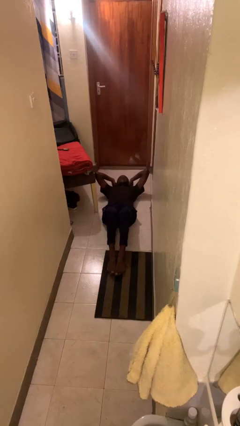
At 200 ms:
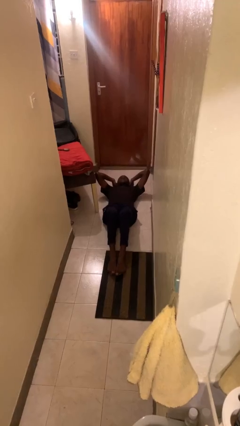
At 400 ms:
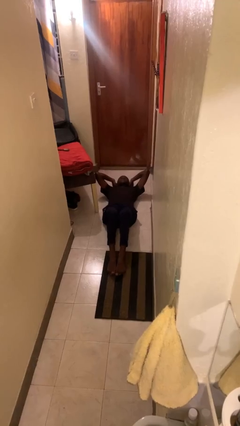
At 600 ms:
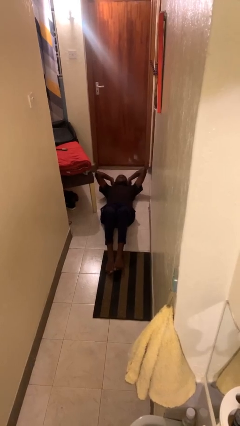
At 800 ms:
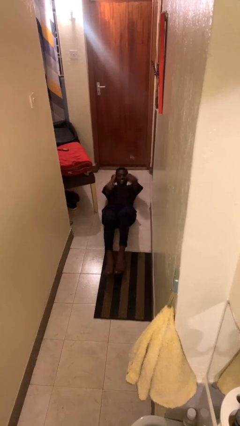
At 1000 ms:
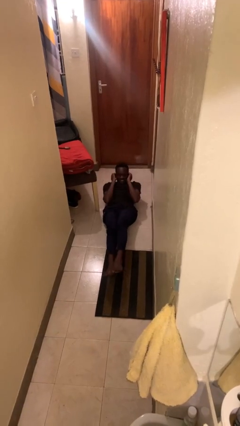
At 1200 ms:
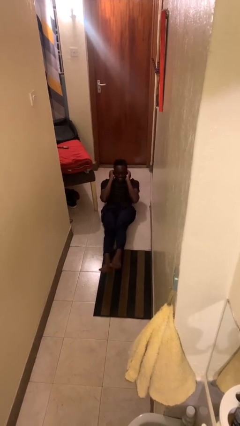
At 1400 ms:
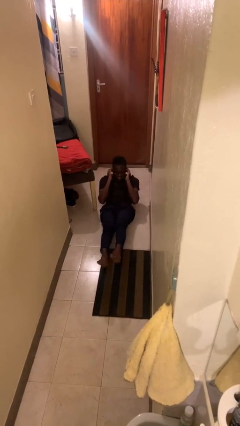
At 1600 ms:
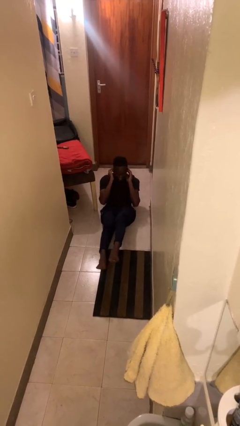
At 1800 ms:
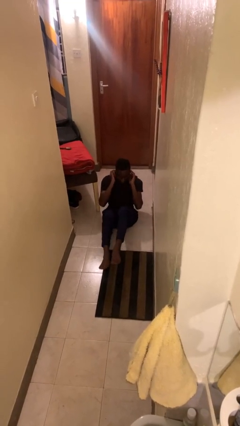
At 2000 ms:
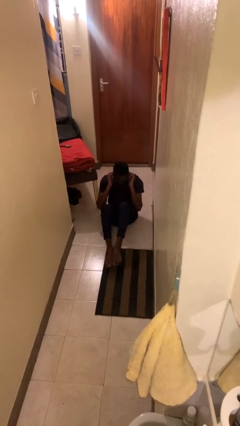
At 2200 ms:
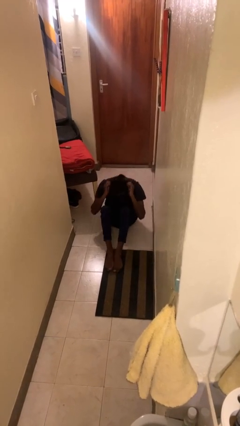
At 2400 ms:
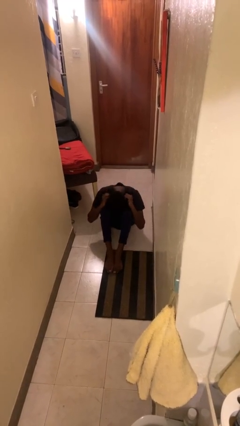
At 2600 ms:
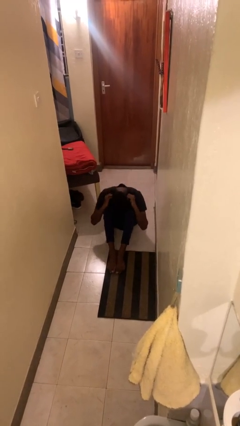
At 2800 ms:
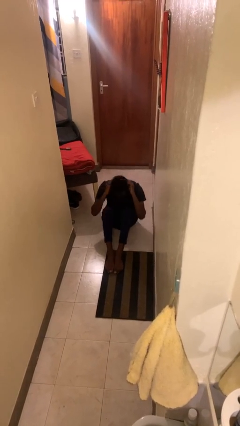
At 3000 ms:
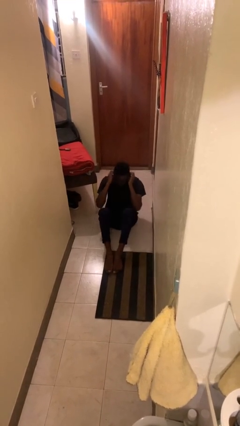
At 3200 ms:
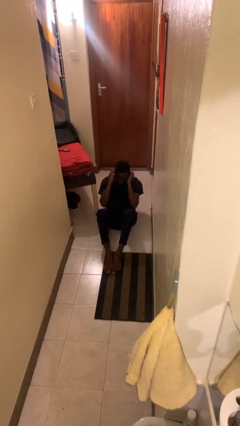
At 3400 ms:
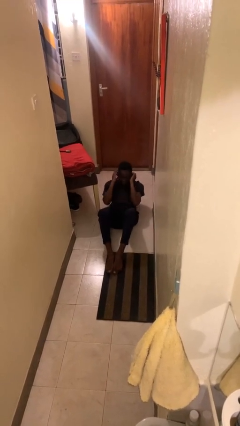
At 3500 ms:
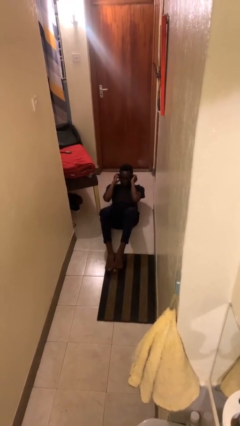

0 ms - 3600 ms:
person exercises with situp

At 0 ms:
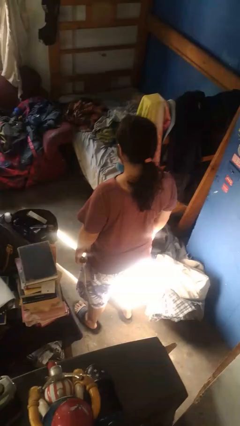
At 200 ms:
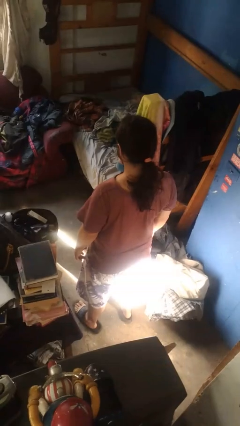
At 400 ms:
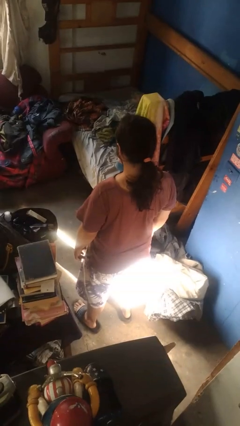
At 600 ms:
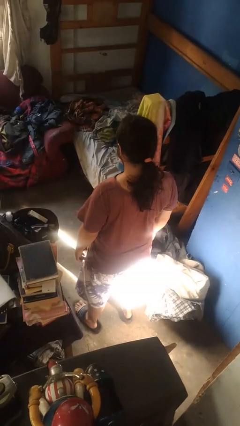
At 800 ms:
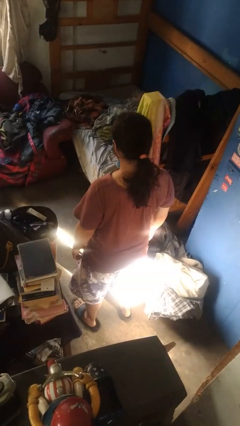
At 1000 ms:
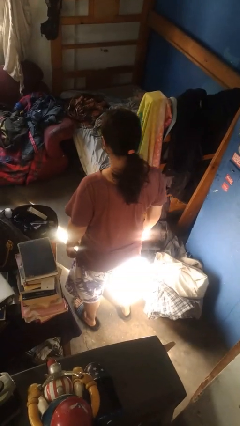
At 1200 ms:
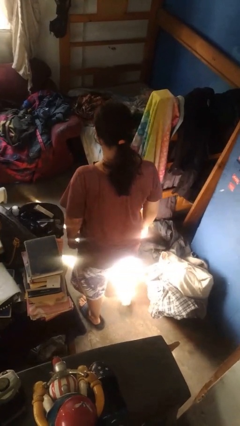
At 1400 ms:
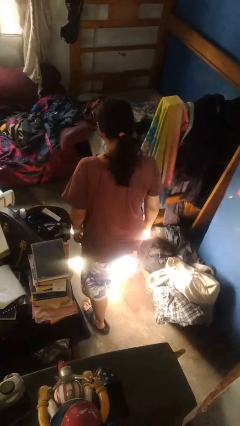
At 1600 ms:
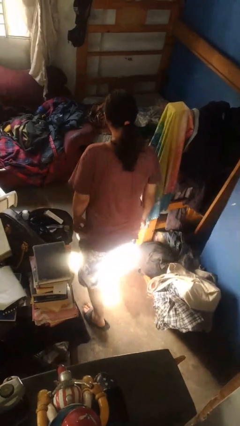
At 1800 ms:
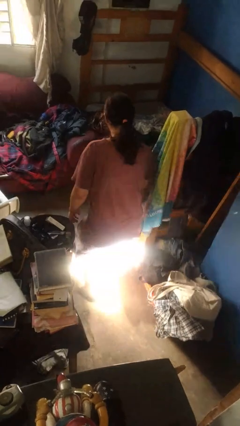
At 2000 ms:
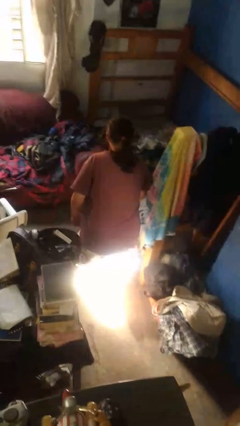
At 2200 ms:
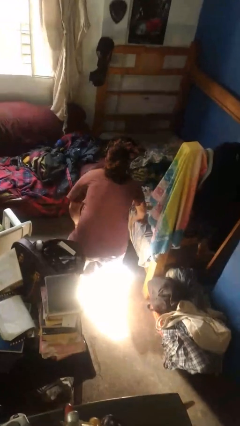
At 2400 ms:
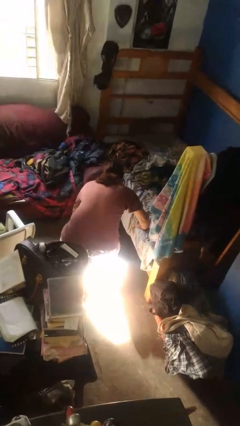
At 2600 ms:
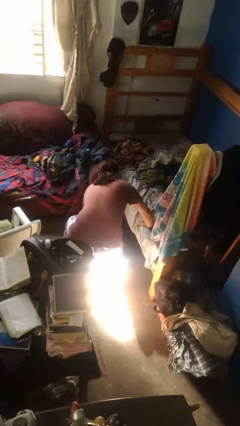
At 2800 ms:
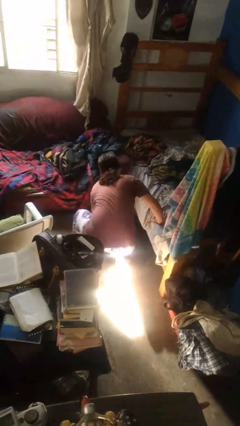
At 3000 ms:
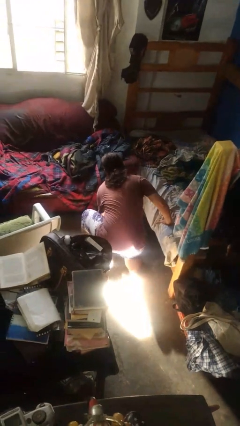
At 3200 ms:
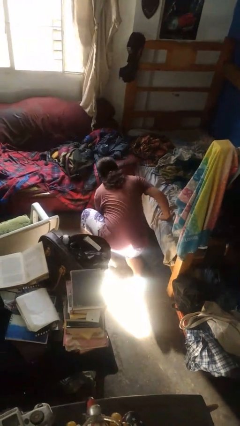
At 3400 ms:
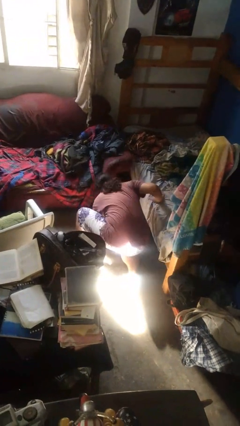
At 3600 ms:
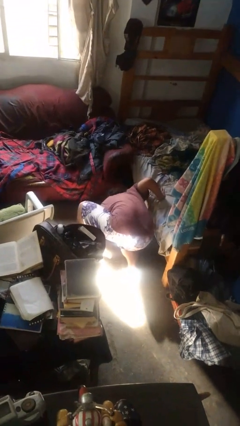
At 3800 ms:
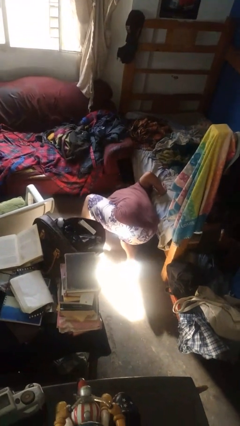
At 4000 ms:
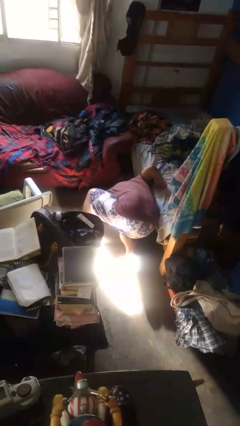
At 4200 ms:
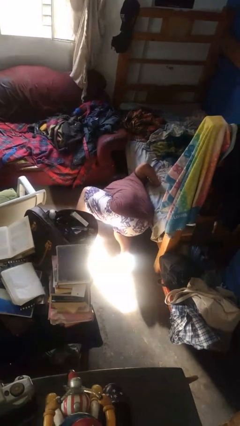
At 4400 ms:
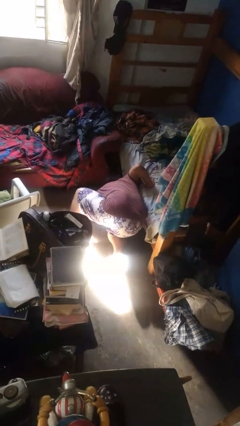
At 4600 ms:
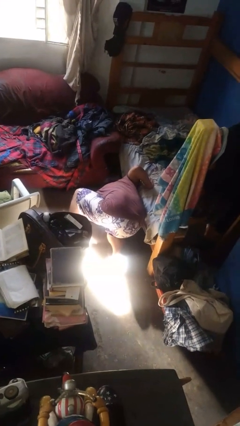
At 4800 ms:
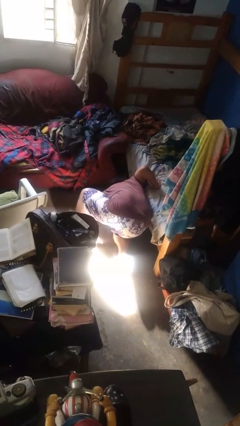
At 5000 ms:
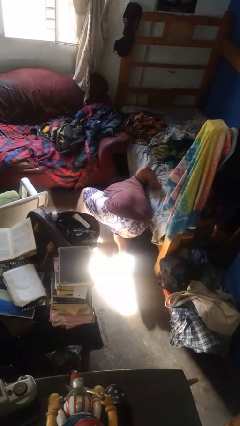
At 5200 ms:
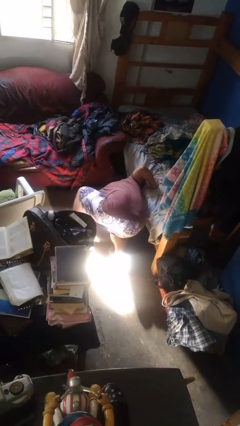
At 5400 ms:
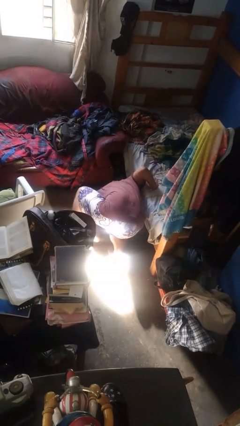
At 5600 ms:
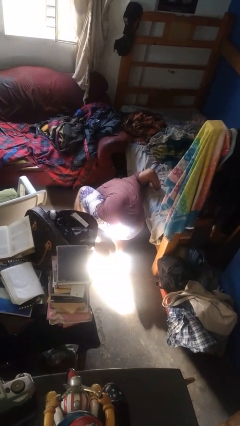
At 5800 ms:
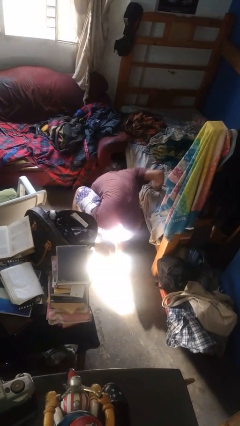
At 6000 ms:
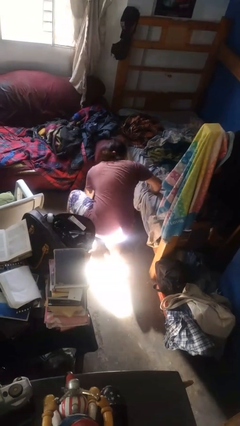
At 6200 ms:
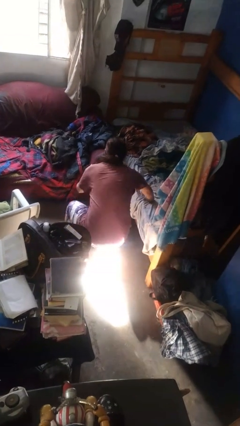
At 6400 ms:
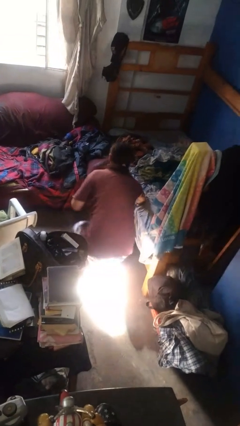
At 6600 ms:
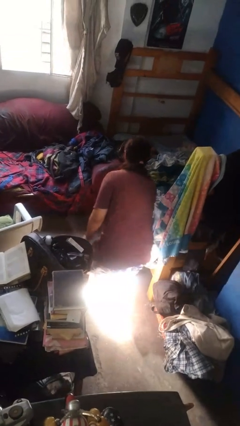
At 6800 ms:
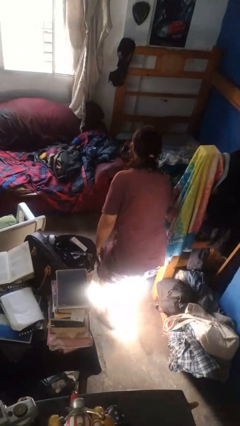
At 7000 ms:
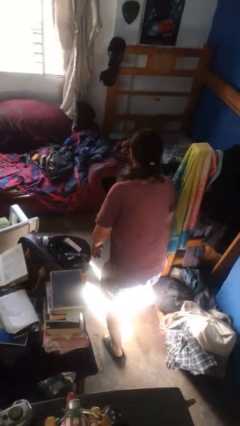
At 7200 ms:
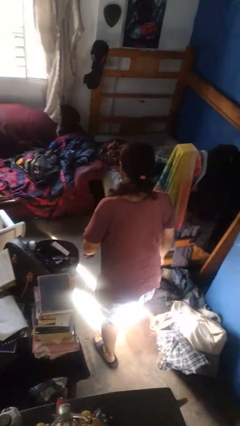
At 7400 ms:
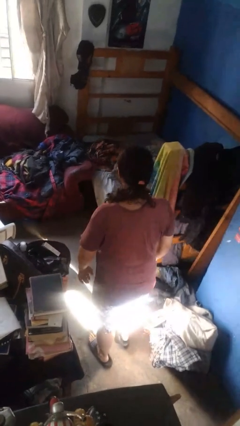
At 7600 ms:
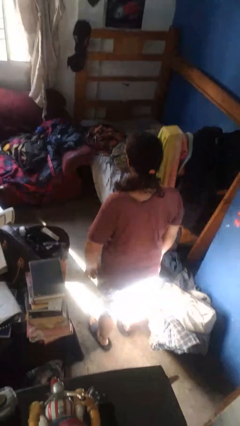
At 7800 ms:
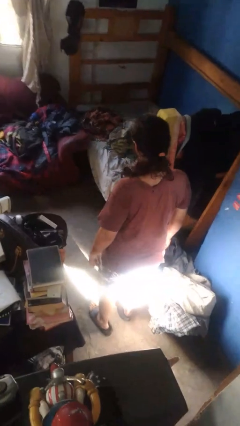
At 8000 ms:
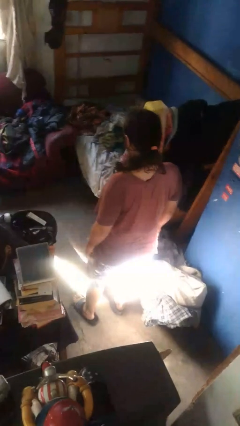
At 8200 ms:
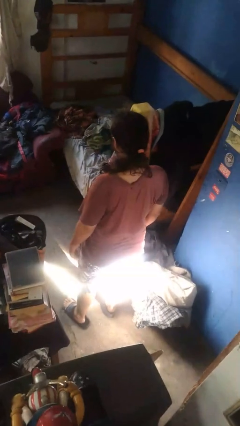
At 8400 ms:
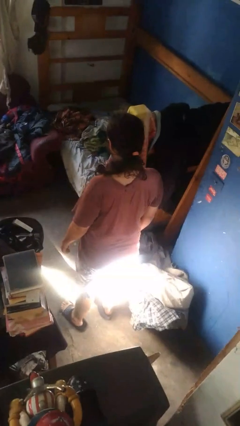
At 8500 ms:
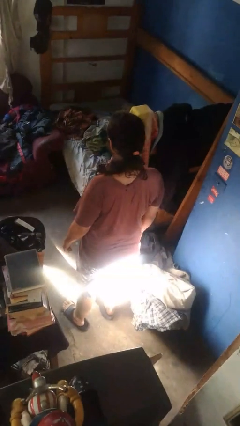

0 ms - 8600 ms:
person searches under bed

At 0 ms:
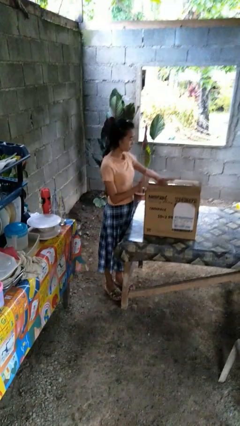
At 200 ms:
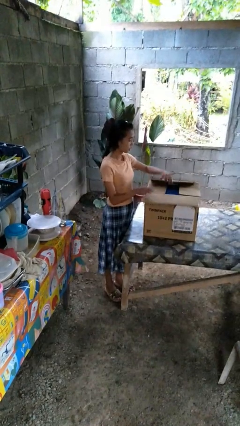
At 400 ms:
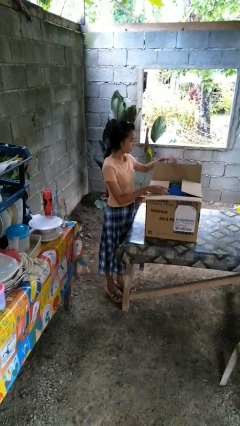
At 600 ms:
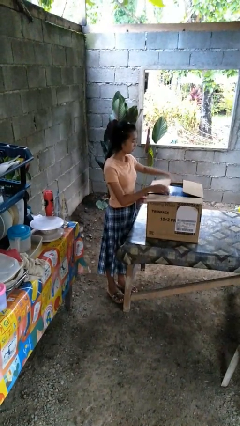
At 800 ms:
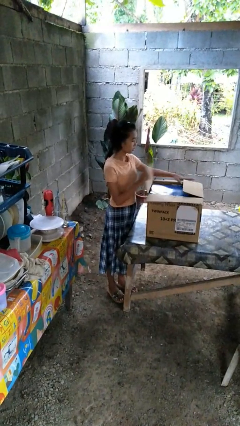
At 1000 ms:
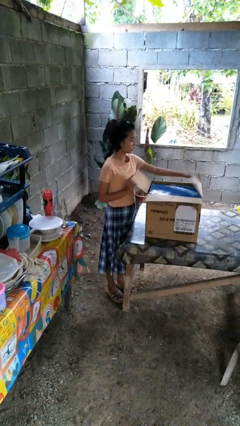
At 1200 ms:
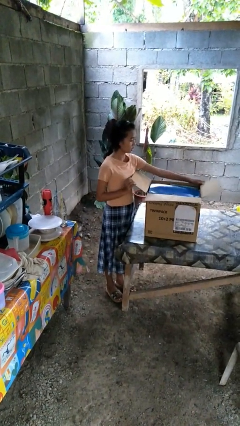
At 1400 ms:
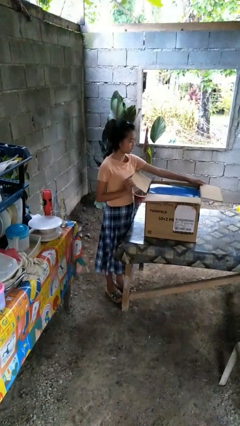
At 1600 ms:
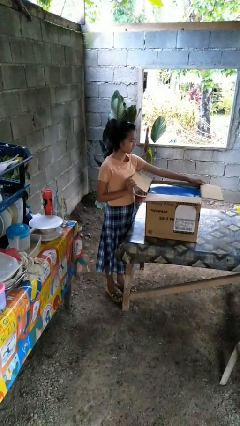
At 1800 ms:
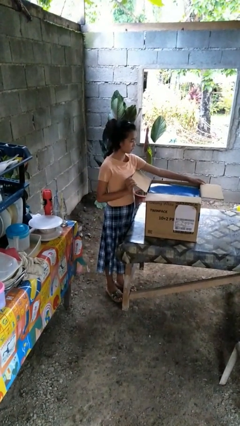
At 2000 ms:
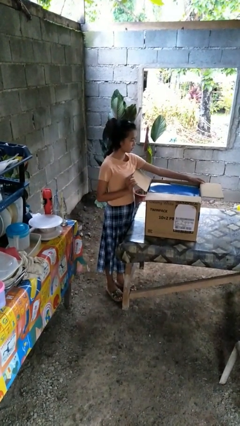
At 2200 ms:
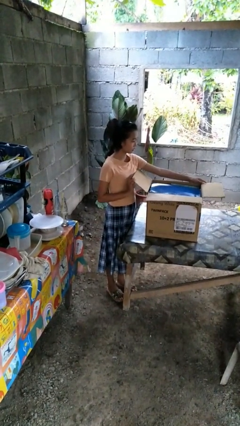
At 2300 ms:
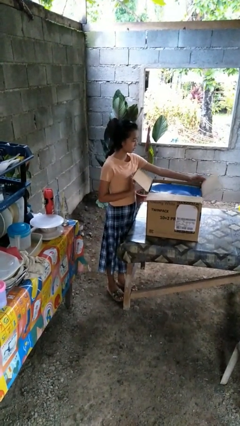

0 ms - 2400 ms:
person opens box

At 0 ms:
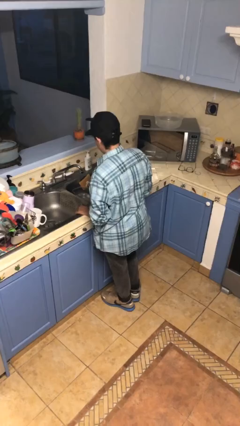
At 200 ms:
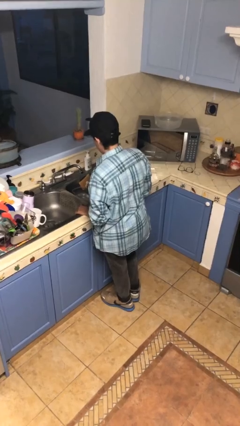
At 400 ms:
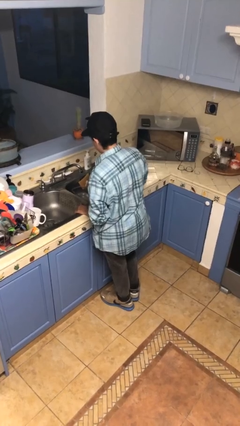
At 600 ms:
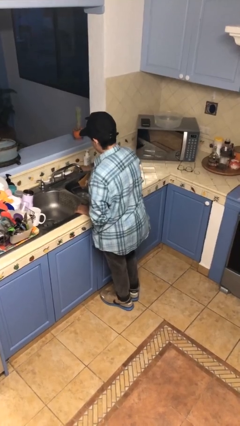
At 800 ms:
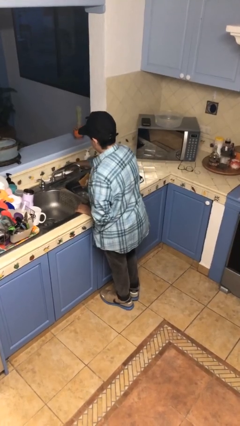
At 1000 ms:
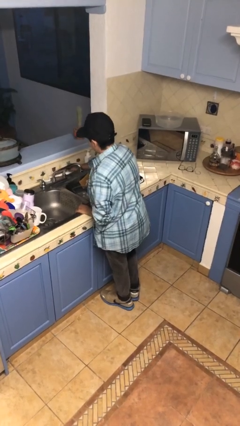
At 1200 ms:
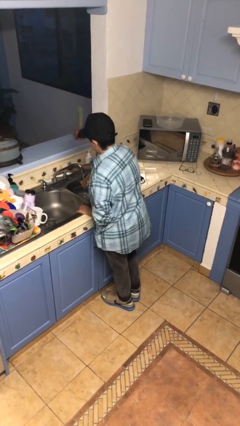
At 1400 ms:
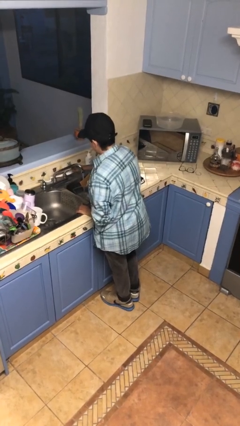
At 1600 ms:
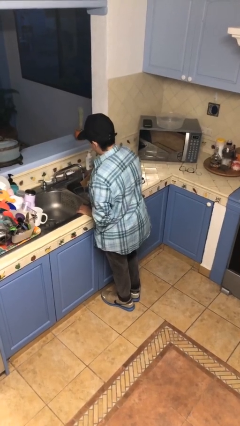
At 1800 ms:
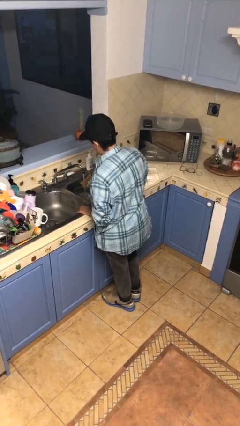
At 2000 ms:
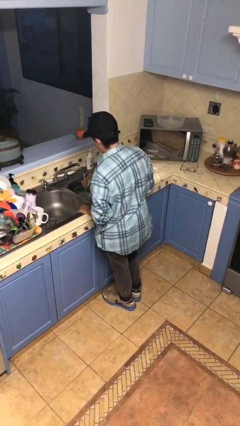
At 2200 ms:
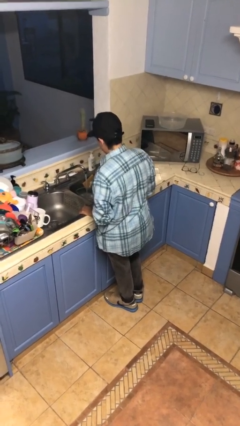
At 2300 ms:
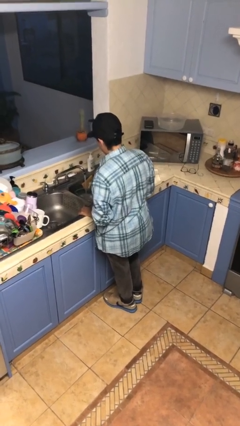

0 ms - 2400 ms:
person turns on faucet

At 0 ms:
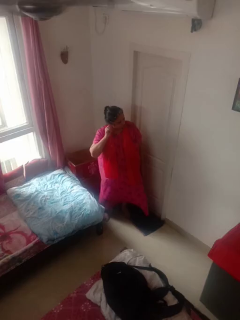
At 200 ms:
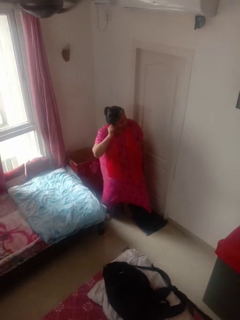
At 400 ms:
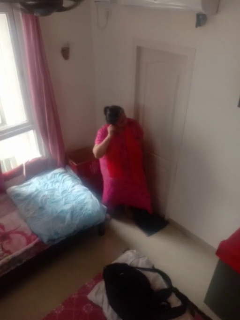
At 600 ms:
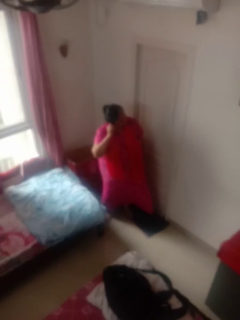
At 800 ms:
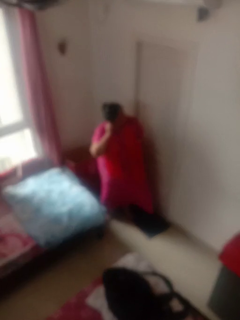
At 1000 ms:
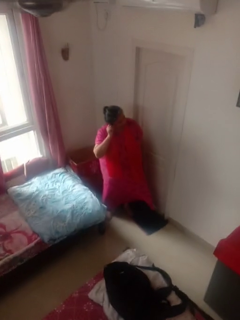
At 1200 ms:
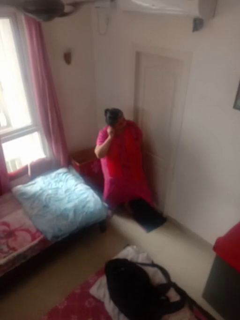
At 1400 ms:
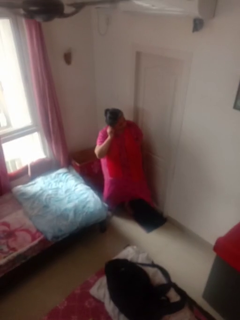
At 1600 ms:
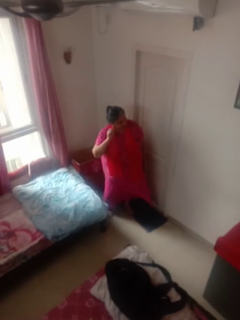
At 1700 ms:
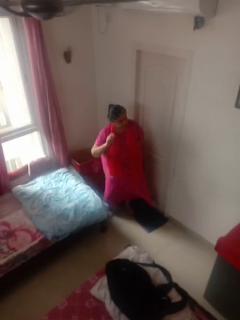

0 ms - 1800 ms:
person touches earlobe
